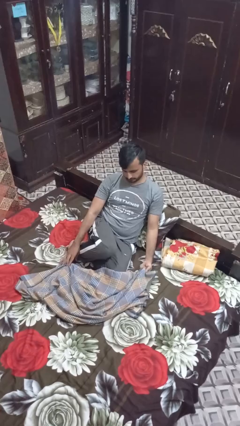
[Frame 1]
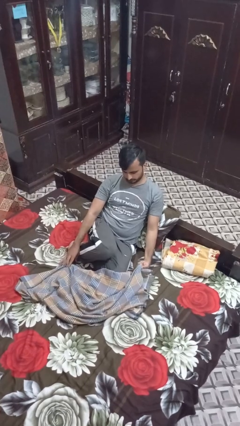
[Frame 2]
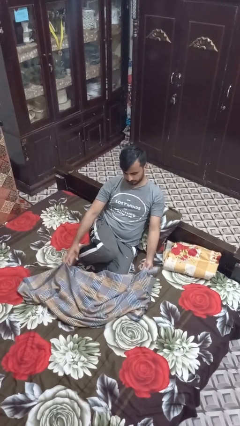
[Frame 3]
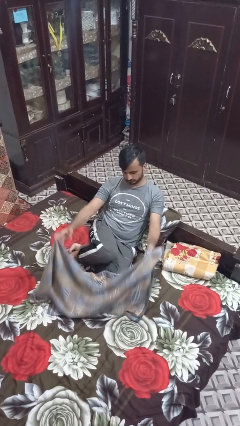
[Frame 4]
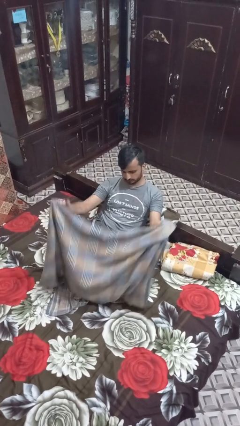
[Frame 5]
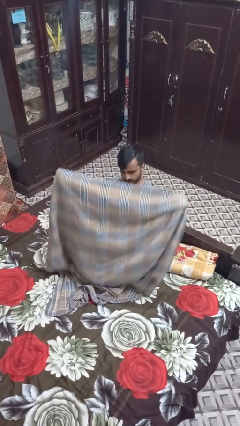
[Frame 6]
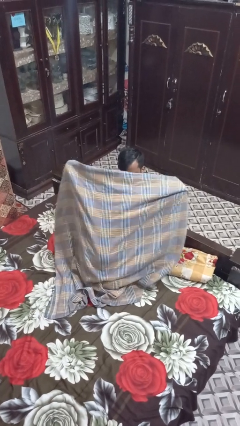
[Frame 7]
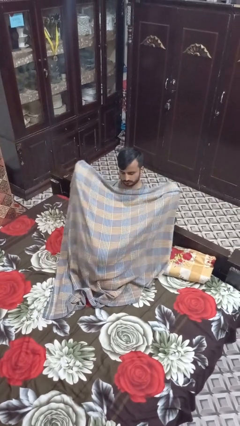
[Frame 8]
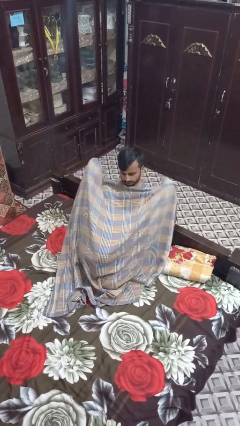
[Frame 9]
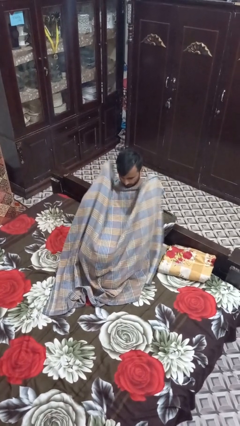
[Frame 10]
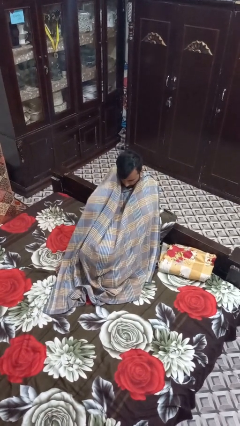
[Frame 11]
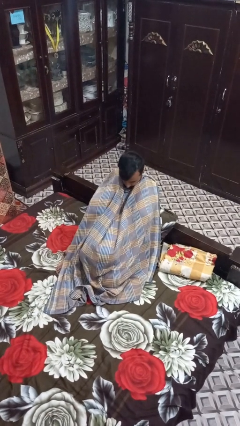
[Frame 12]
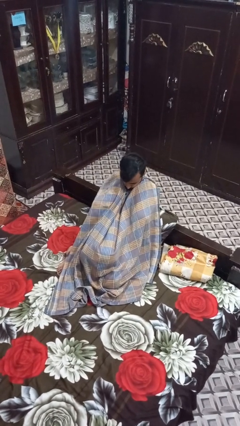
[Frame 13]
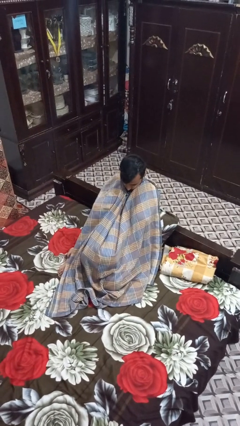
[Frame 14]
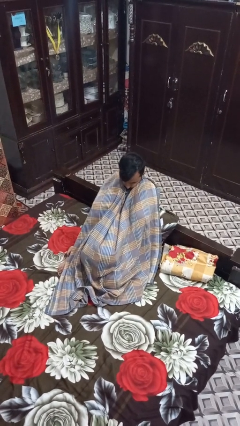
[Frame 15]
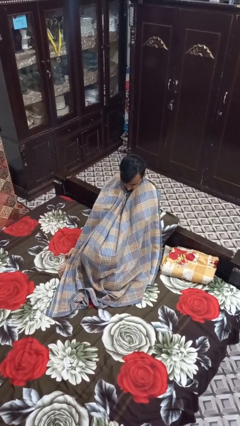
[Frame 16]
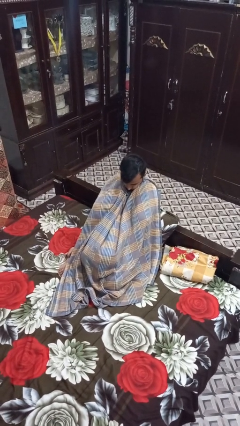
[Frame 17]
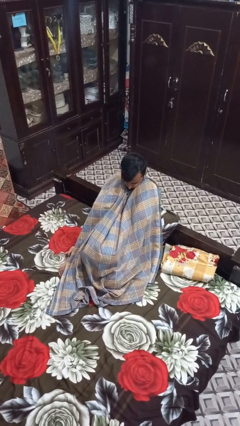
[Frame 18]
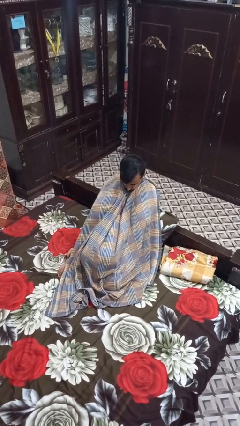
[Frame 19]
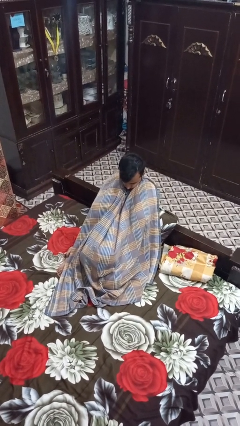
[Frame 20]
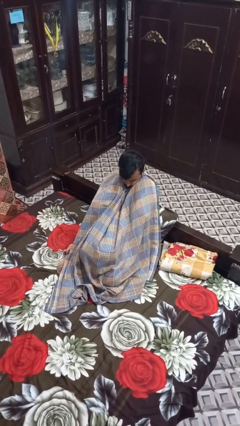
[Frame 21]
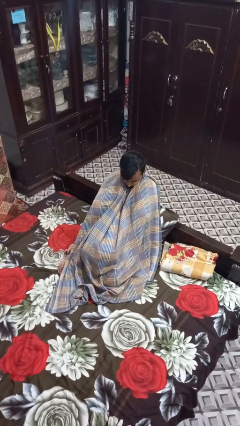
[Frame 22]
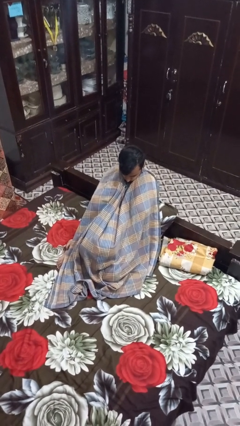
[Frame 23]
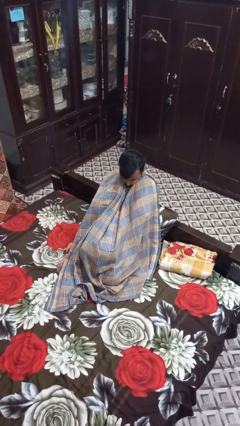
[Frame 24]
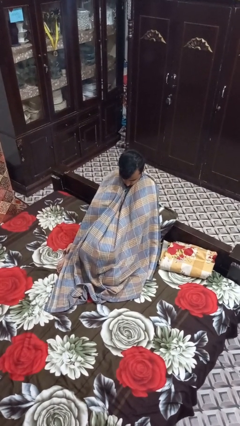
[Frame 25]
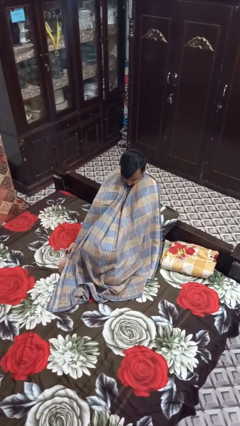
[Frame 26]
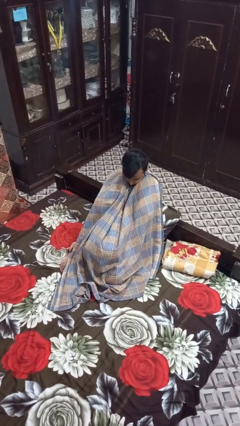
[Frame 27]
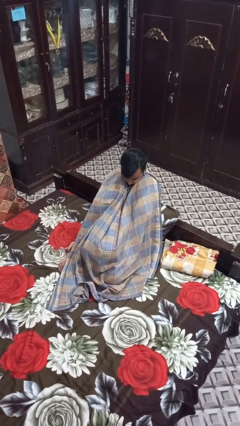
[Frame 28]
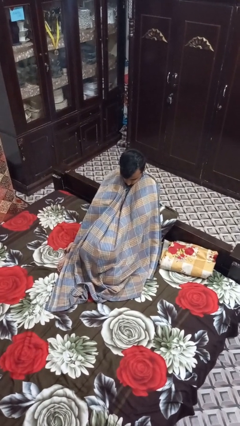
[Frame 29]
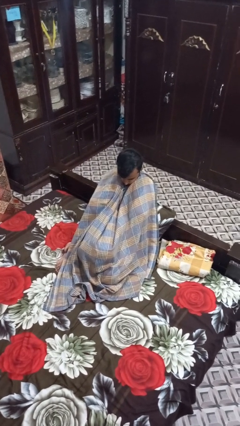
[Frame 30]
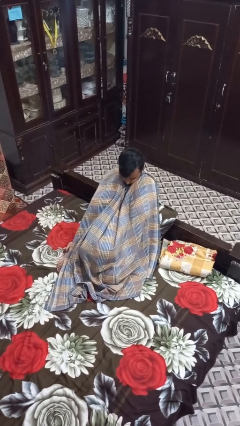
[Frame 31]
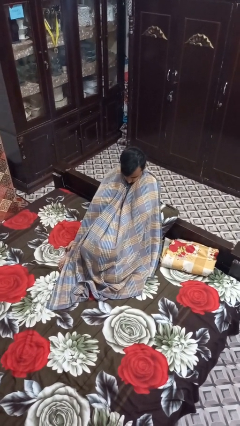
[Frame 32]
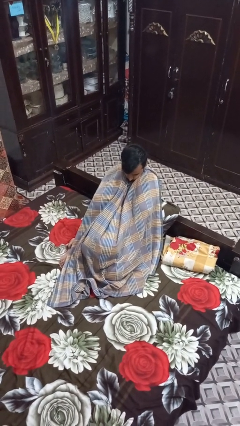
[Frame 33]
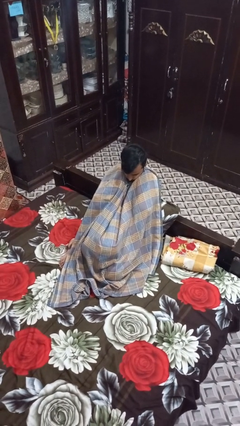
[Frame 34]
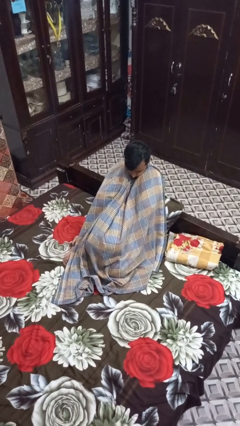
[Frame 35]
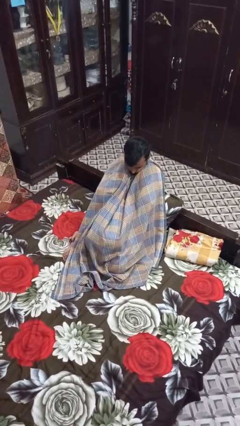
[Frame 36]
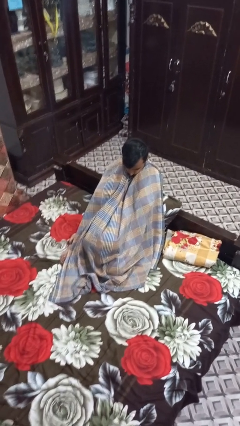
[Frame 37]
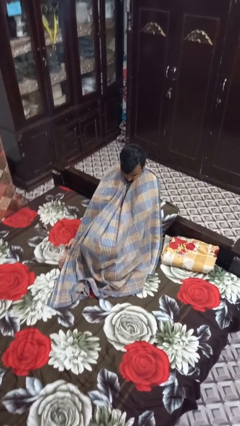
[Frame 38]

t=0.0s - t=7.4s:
person covers with blanket

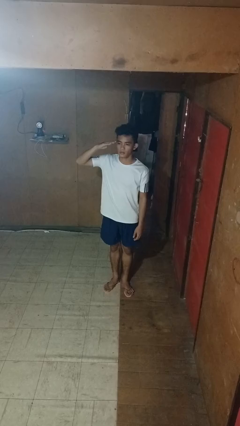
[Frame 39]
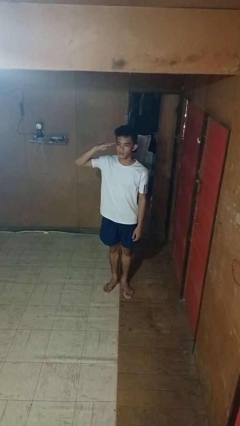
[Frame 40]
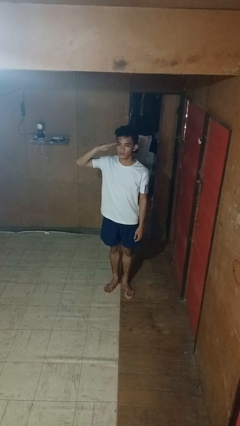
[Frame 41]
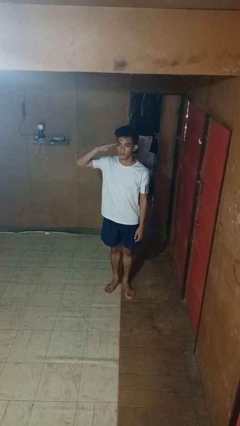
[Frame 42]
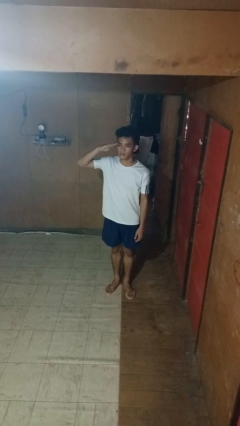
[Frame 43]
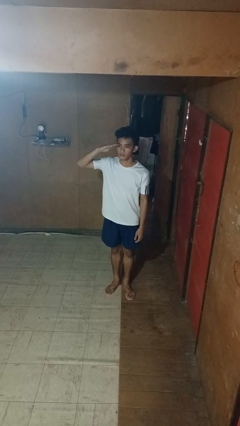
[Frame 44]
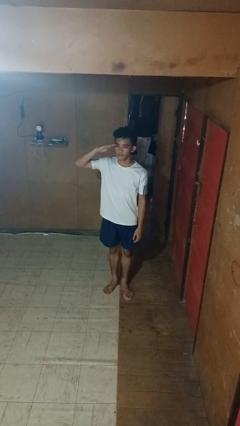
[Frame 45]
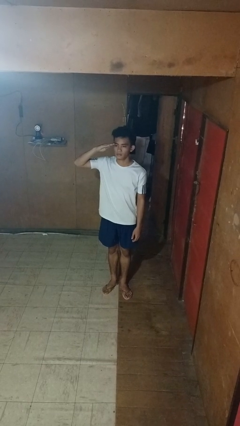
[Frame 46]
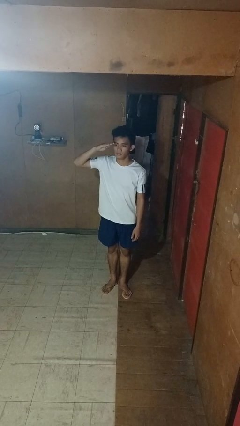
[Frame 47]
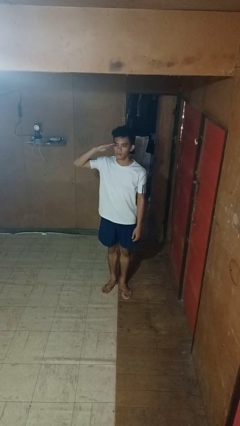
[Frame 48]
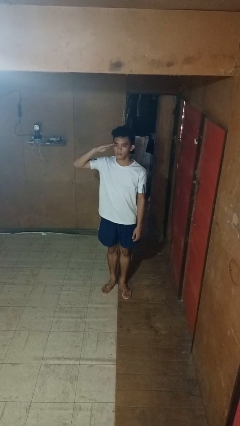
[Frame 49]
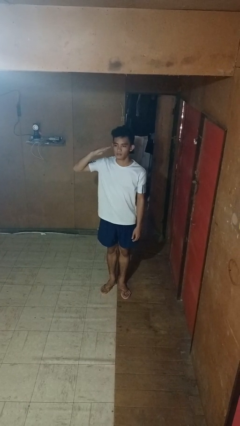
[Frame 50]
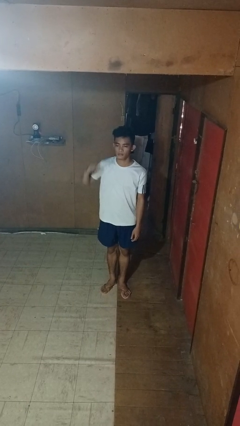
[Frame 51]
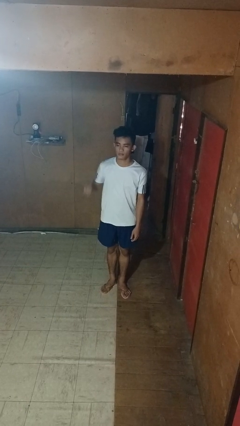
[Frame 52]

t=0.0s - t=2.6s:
person salutes

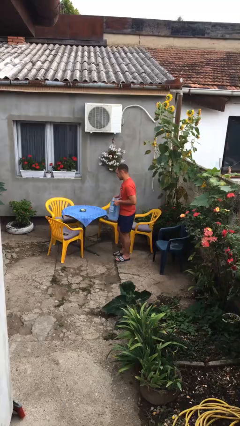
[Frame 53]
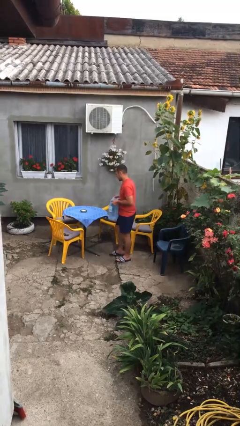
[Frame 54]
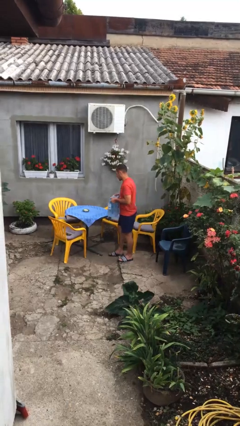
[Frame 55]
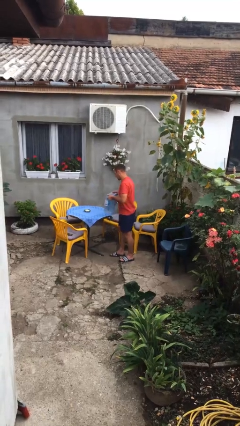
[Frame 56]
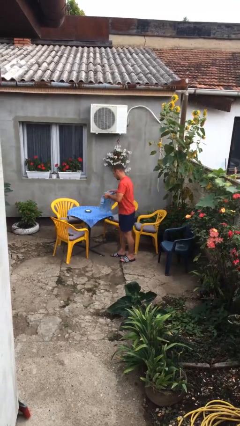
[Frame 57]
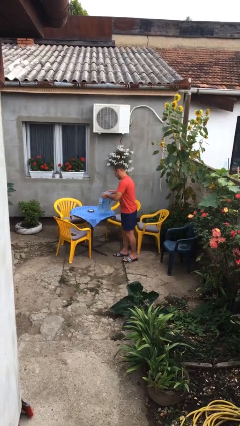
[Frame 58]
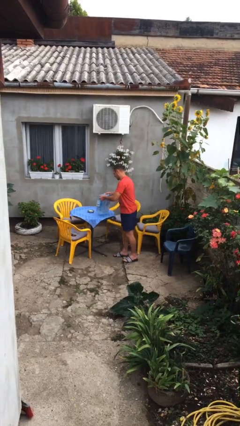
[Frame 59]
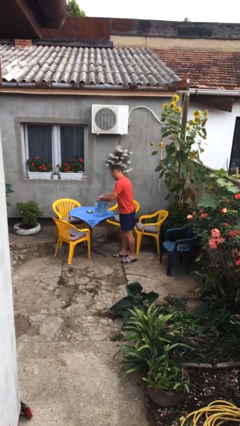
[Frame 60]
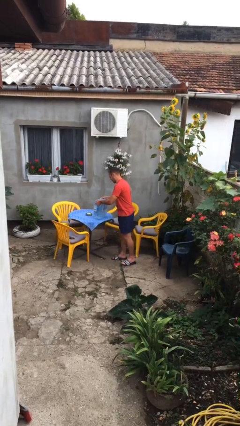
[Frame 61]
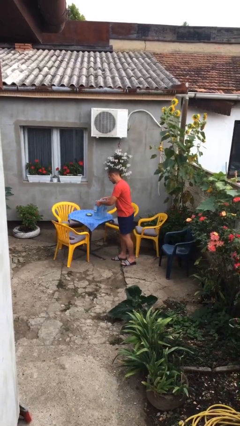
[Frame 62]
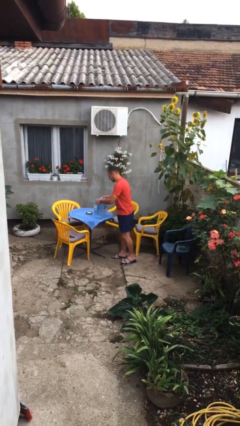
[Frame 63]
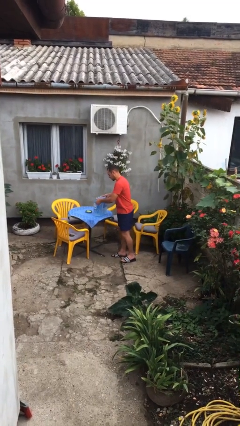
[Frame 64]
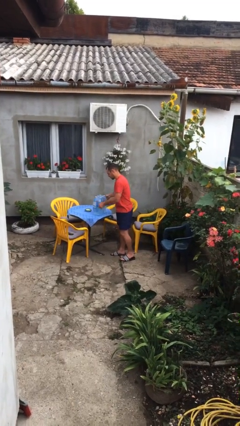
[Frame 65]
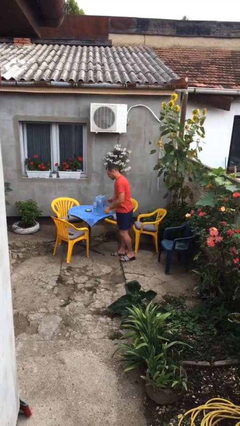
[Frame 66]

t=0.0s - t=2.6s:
person puts down object on table

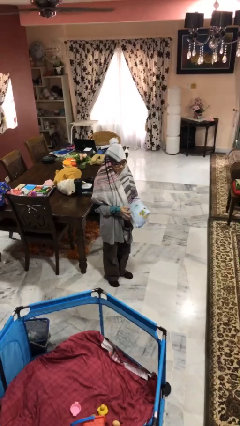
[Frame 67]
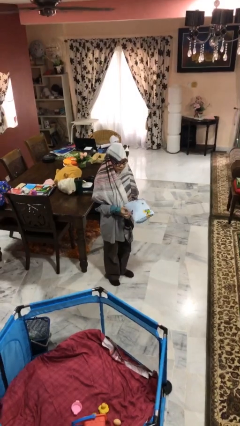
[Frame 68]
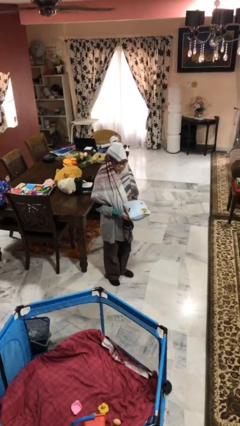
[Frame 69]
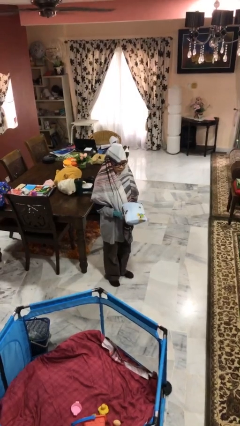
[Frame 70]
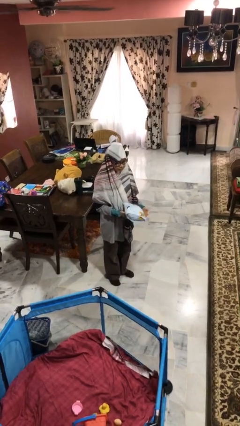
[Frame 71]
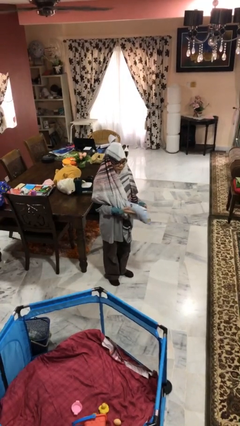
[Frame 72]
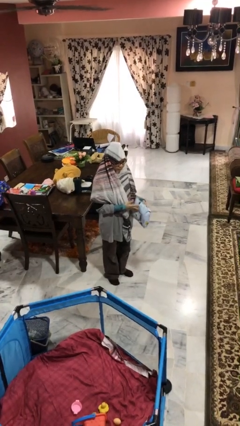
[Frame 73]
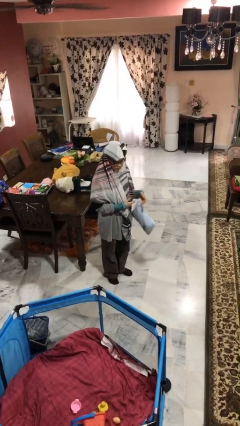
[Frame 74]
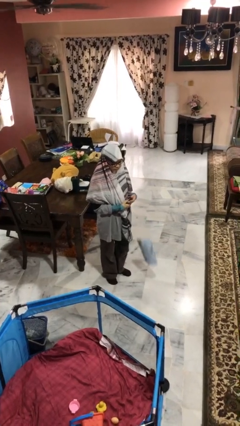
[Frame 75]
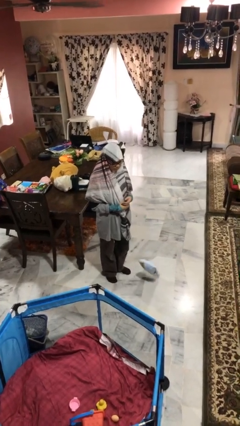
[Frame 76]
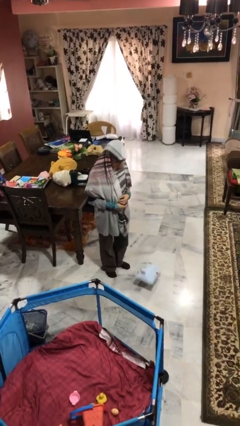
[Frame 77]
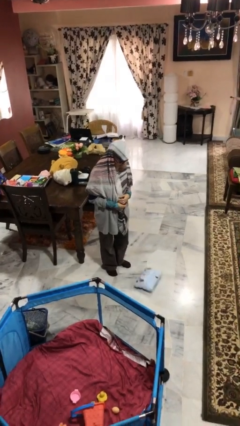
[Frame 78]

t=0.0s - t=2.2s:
person drops object

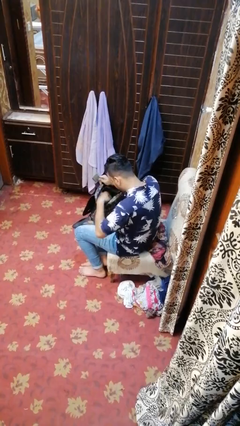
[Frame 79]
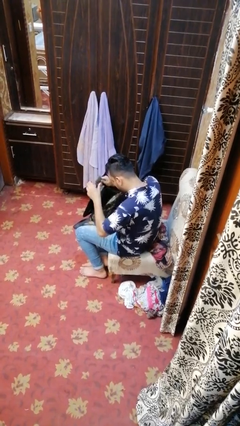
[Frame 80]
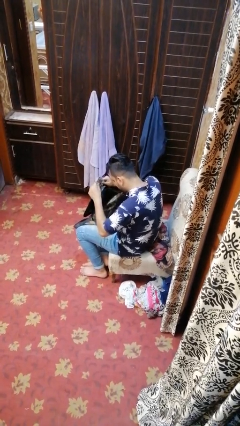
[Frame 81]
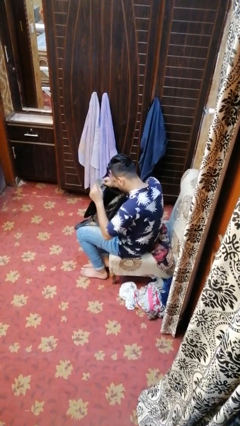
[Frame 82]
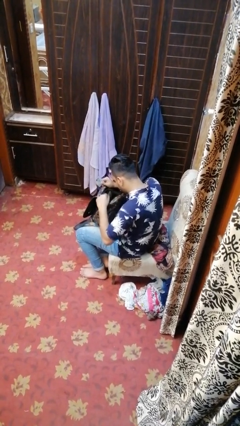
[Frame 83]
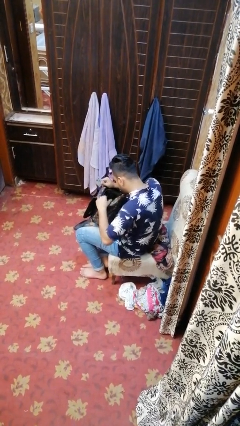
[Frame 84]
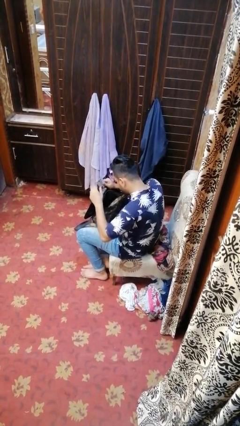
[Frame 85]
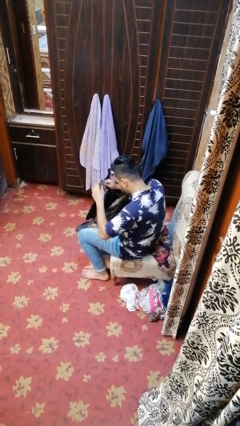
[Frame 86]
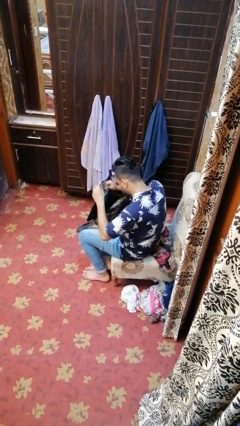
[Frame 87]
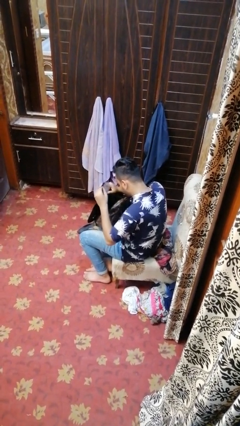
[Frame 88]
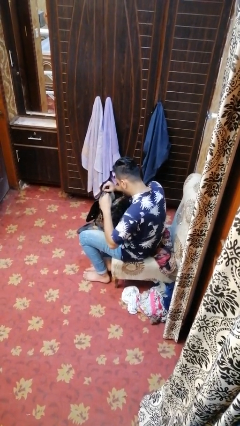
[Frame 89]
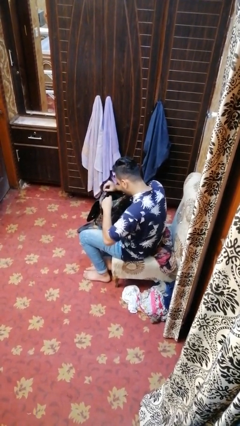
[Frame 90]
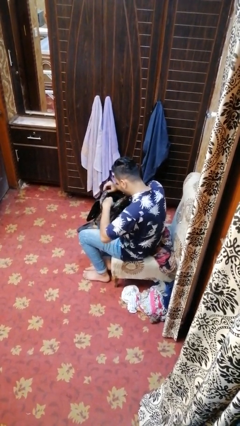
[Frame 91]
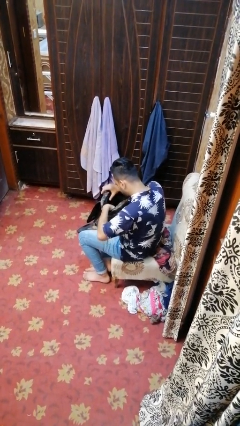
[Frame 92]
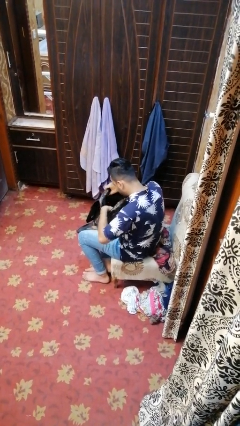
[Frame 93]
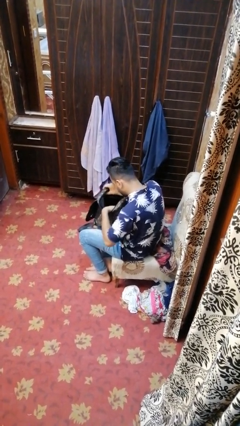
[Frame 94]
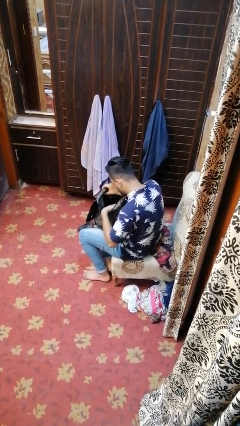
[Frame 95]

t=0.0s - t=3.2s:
person puts object into backpack
